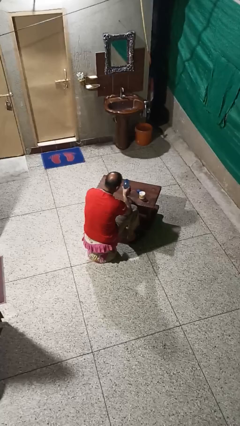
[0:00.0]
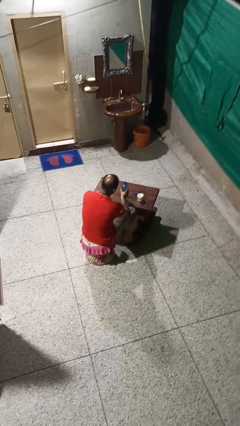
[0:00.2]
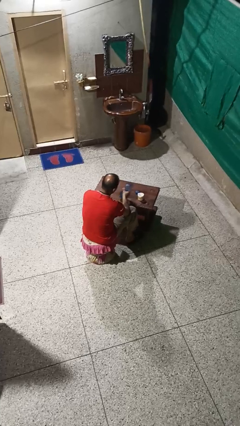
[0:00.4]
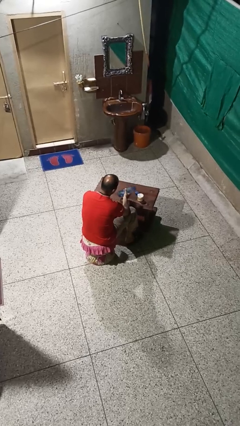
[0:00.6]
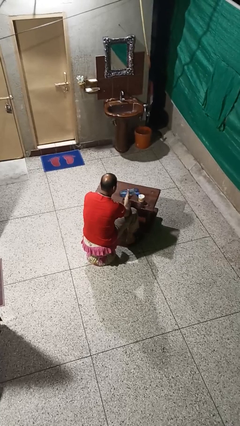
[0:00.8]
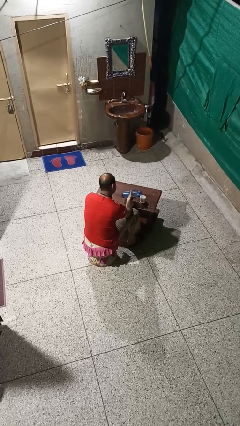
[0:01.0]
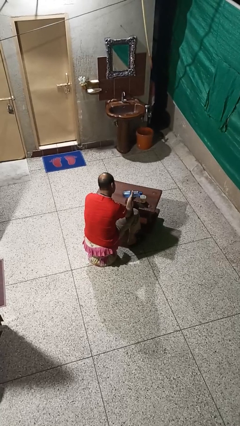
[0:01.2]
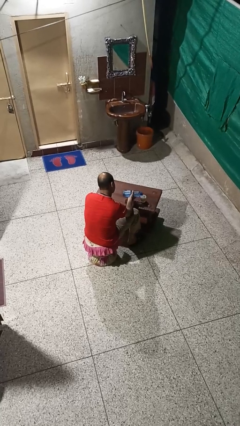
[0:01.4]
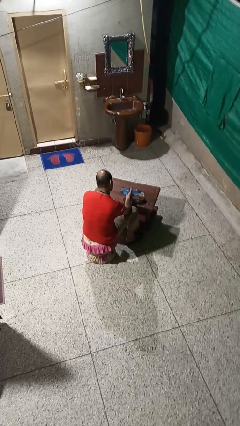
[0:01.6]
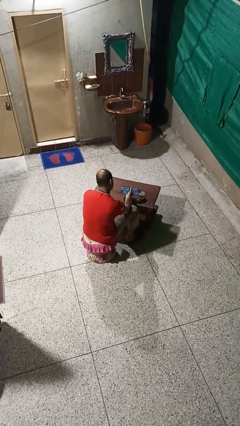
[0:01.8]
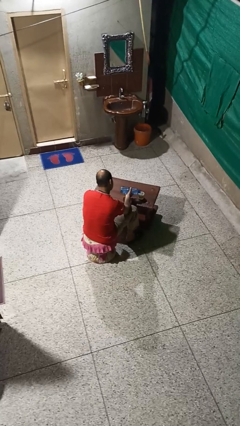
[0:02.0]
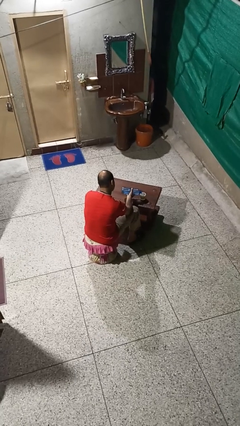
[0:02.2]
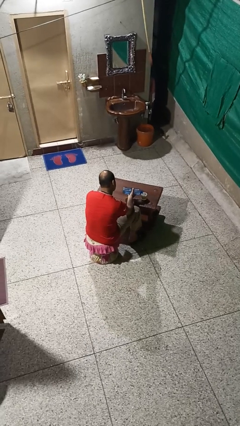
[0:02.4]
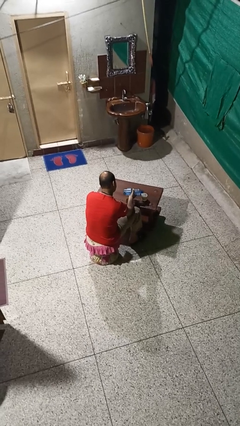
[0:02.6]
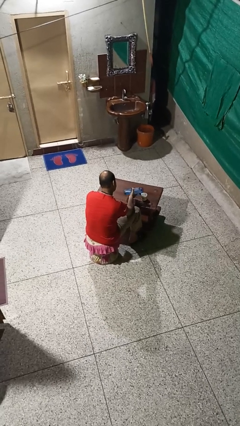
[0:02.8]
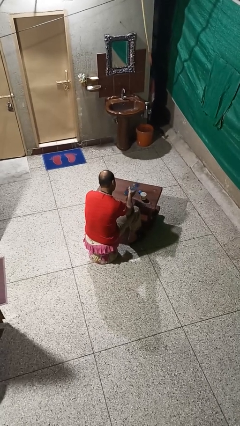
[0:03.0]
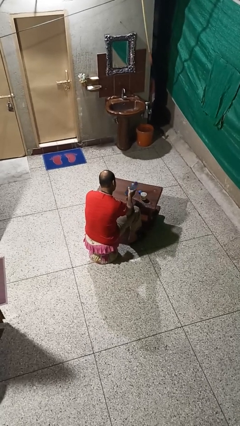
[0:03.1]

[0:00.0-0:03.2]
person pours liquid into cup

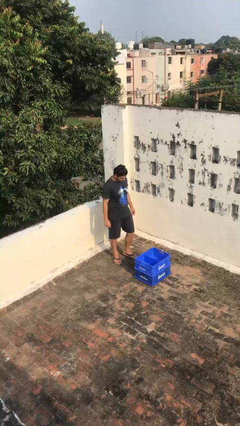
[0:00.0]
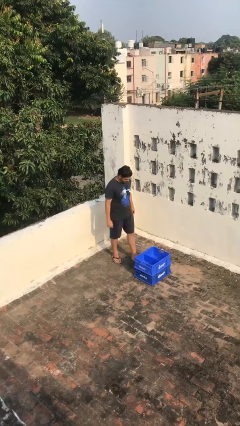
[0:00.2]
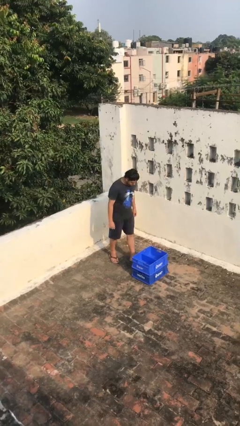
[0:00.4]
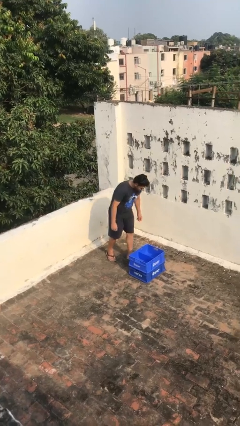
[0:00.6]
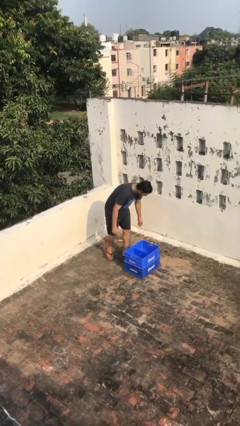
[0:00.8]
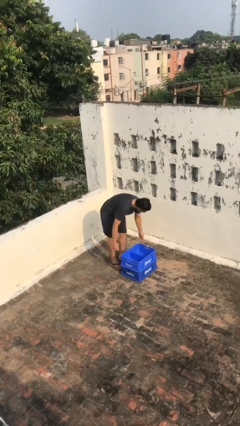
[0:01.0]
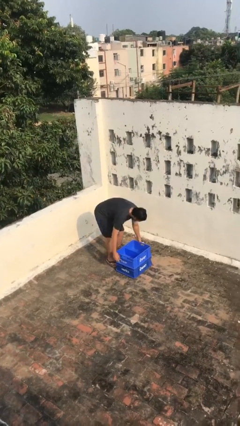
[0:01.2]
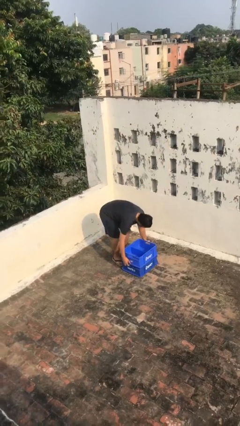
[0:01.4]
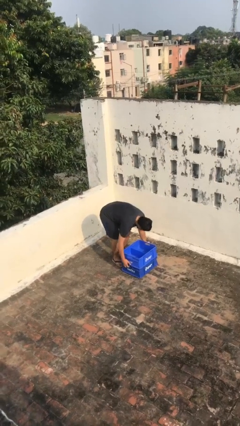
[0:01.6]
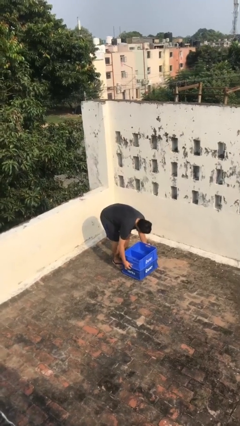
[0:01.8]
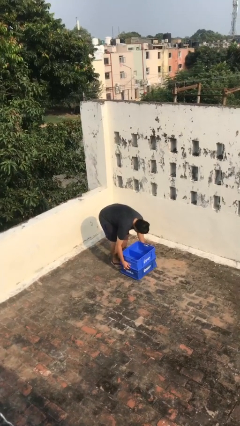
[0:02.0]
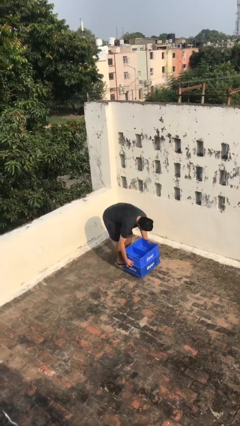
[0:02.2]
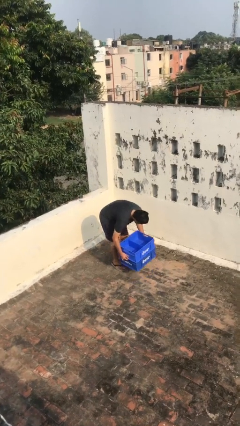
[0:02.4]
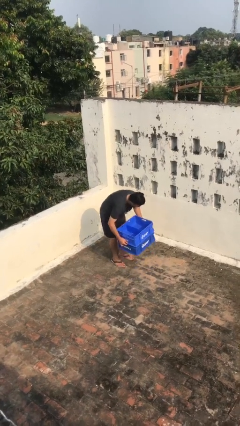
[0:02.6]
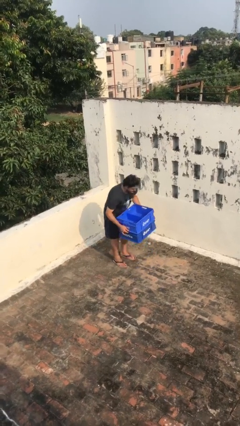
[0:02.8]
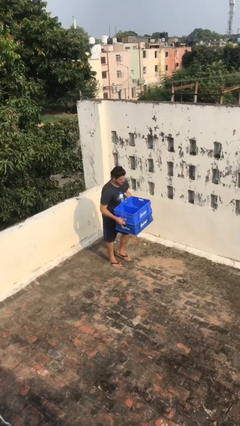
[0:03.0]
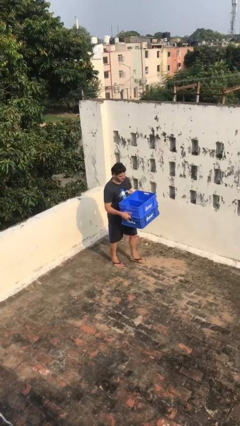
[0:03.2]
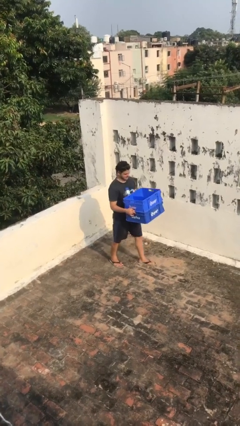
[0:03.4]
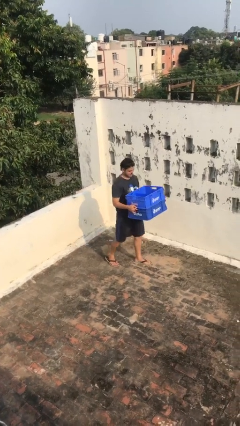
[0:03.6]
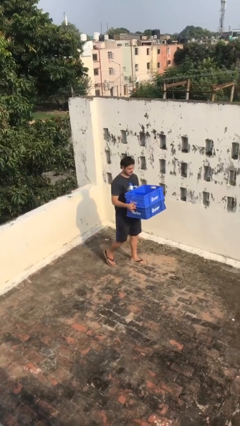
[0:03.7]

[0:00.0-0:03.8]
person picks up object from floor

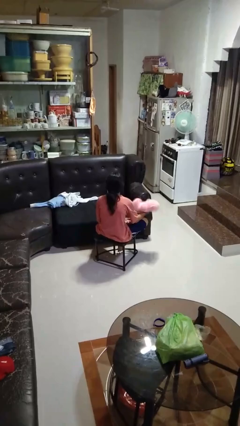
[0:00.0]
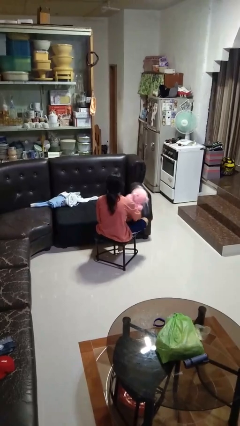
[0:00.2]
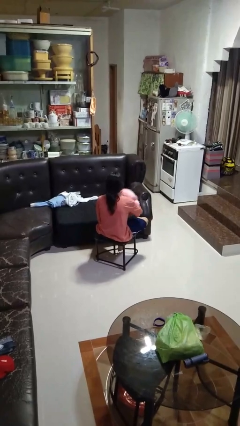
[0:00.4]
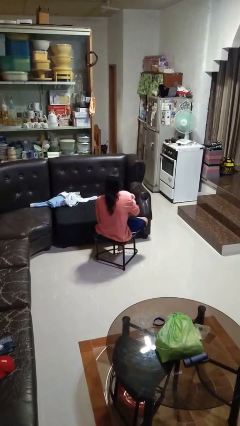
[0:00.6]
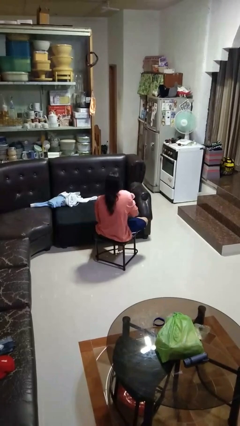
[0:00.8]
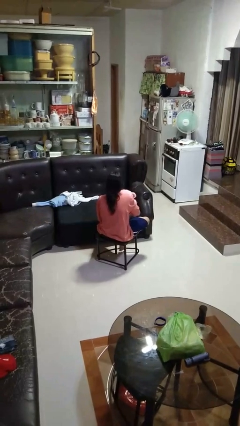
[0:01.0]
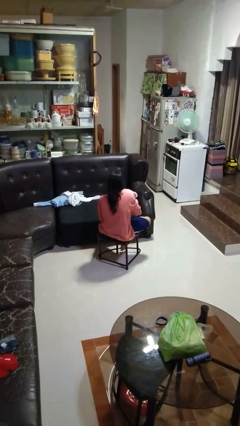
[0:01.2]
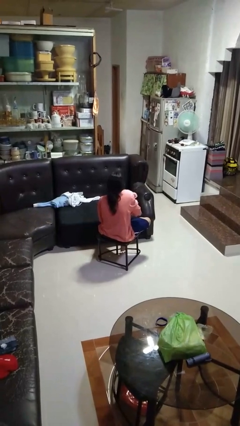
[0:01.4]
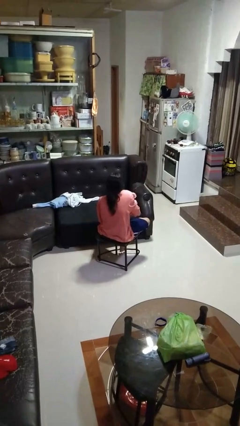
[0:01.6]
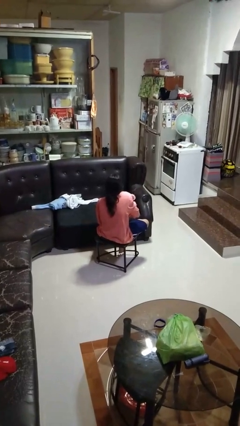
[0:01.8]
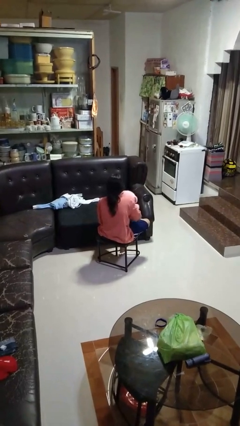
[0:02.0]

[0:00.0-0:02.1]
person hugs stuffed animal

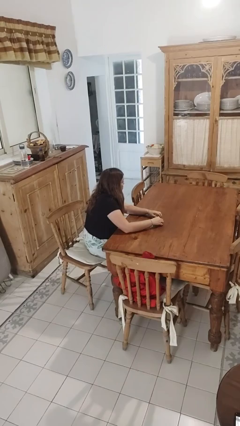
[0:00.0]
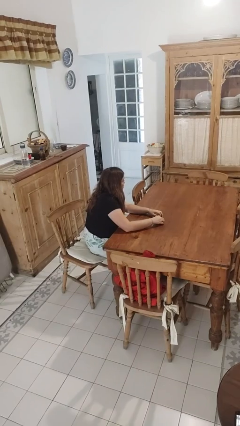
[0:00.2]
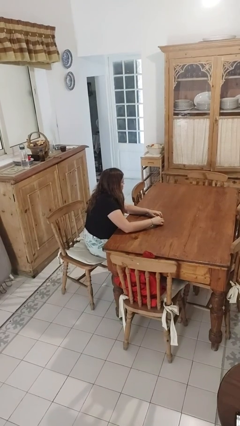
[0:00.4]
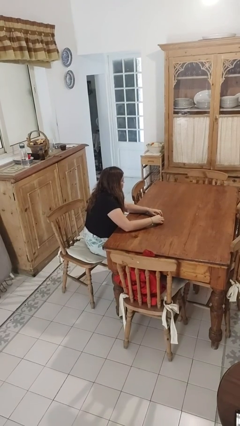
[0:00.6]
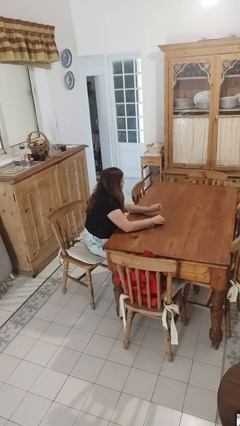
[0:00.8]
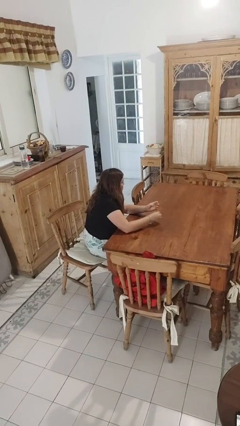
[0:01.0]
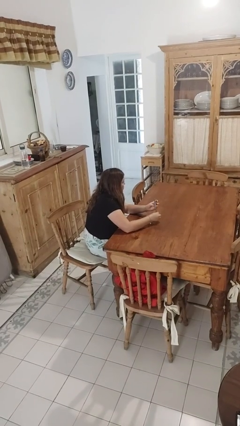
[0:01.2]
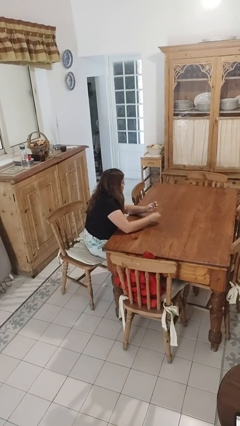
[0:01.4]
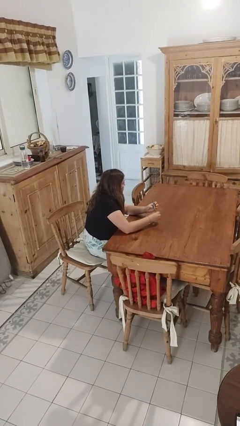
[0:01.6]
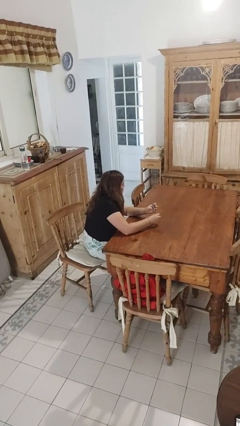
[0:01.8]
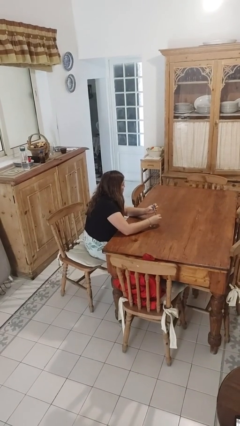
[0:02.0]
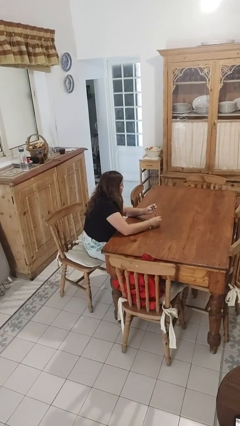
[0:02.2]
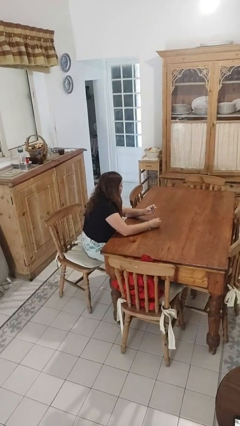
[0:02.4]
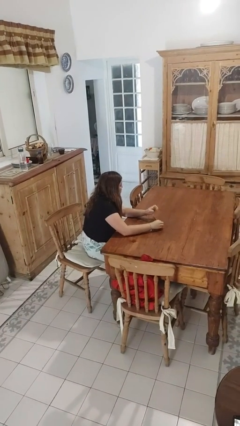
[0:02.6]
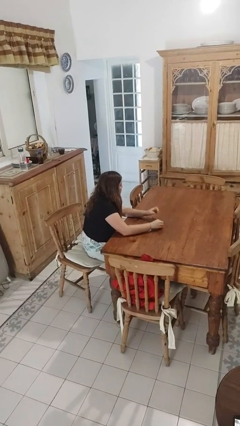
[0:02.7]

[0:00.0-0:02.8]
person files fingernails

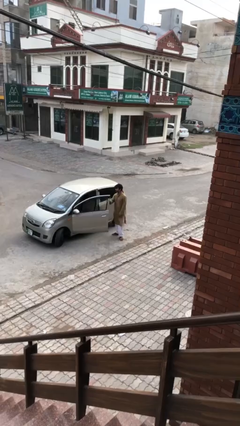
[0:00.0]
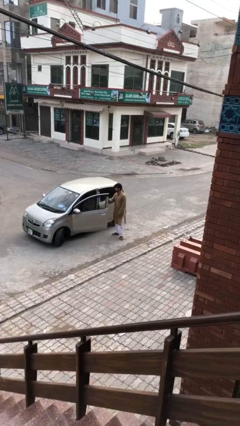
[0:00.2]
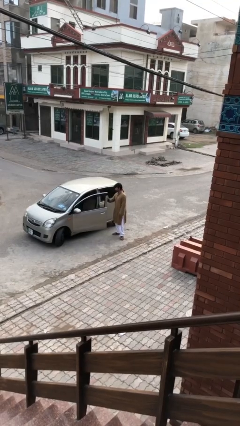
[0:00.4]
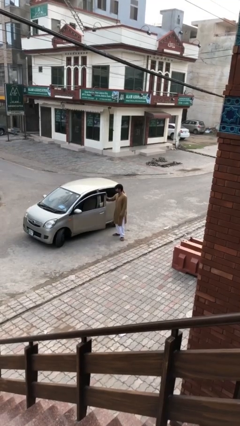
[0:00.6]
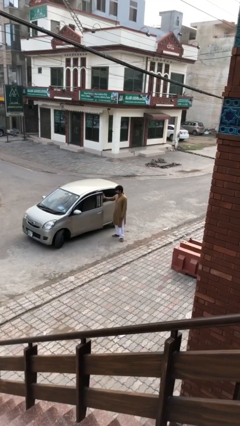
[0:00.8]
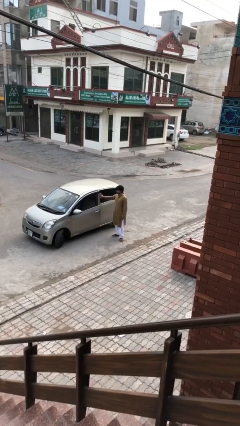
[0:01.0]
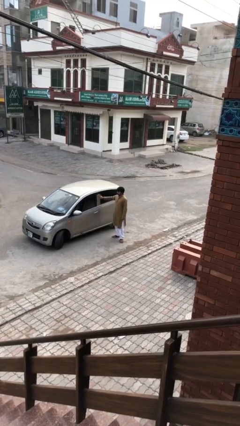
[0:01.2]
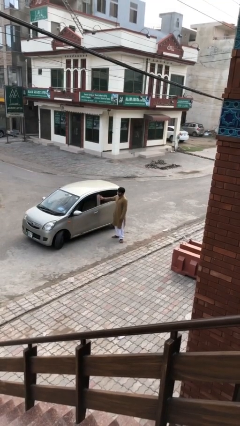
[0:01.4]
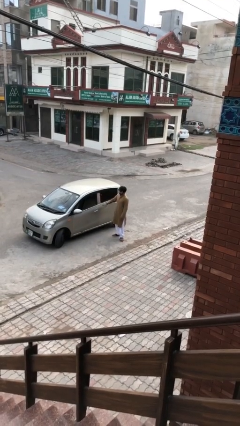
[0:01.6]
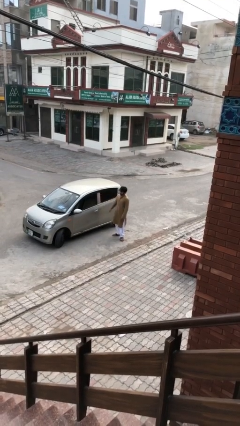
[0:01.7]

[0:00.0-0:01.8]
person closes car door

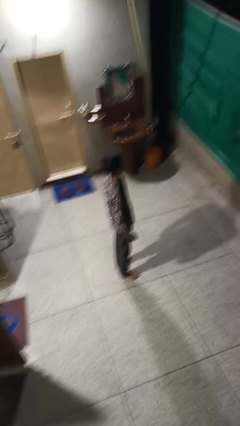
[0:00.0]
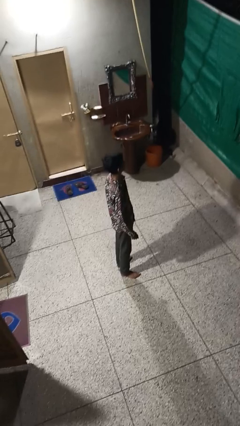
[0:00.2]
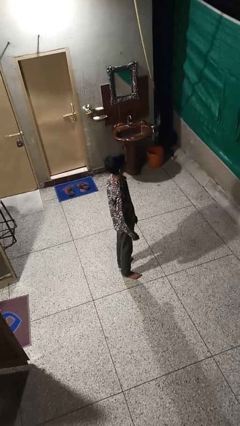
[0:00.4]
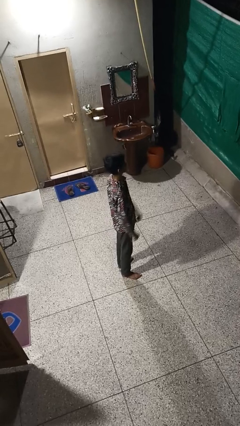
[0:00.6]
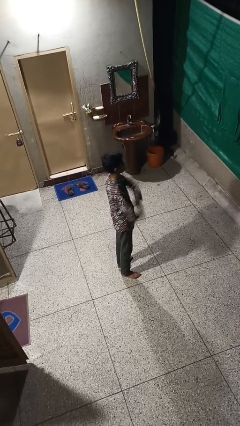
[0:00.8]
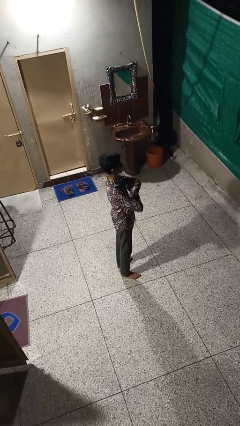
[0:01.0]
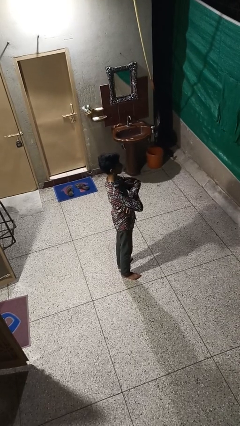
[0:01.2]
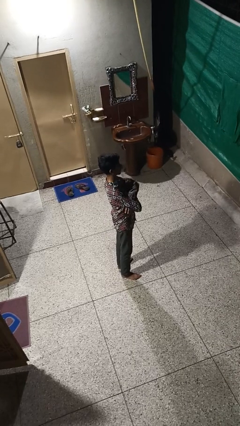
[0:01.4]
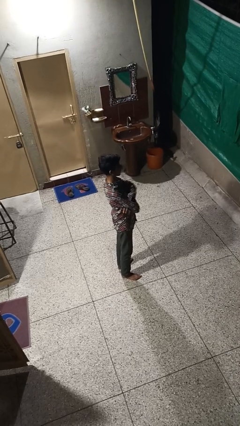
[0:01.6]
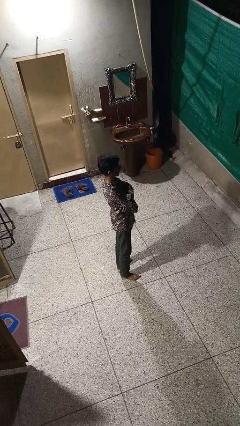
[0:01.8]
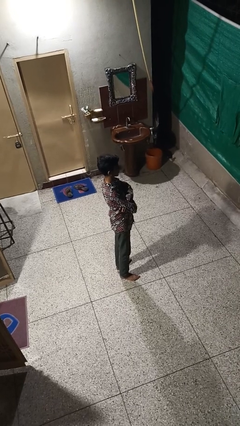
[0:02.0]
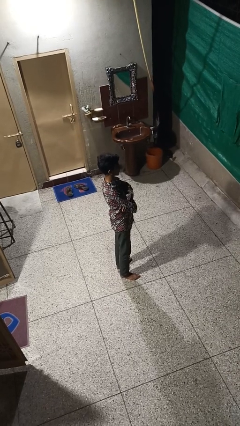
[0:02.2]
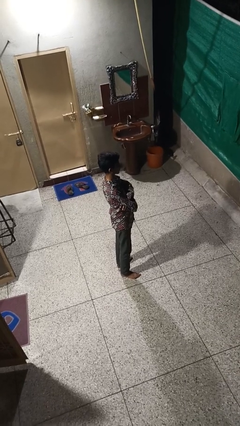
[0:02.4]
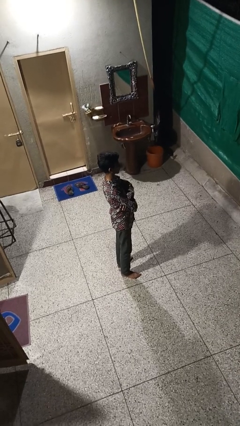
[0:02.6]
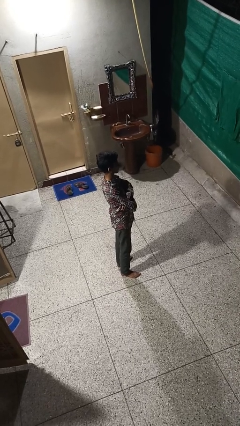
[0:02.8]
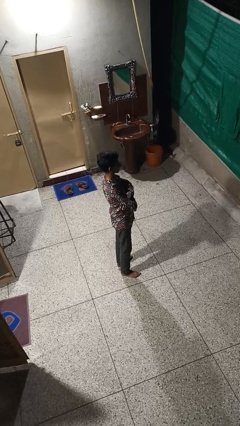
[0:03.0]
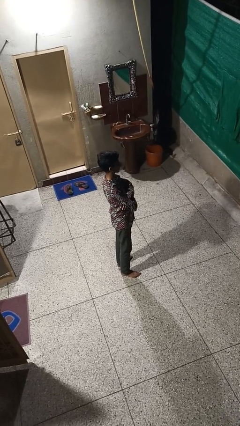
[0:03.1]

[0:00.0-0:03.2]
person crosses arms

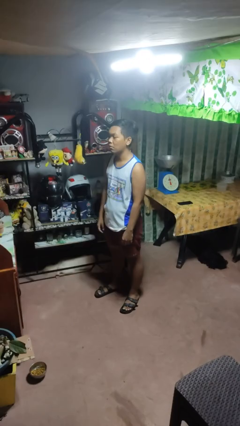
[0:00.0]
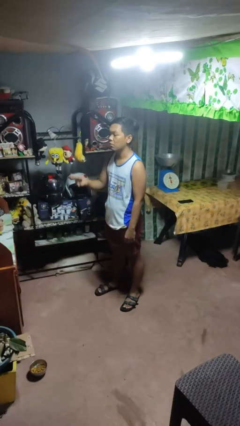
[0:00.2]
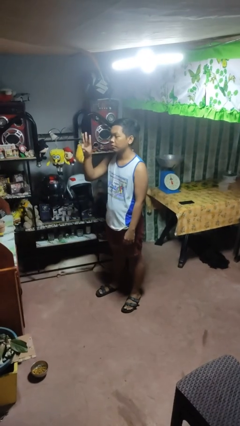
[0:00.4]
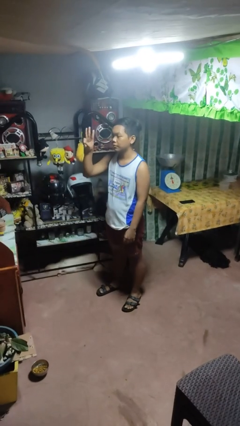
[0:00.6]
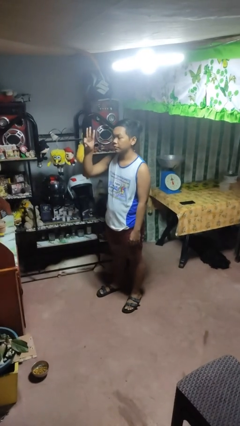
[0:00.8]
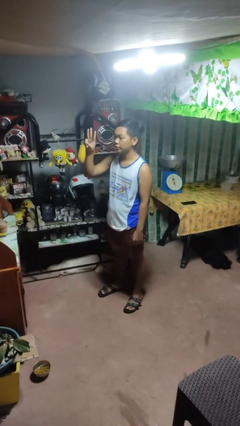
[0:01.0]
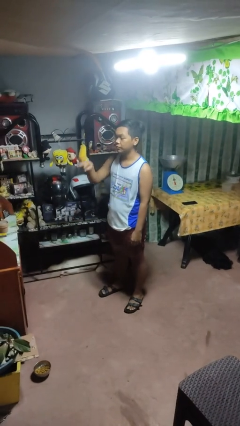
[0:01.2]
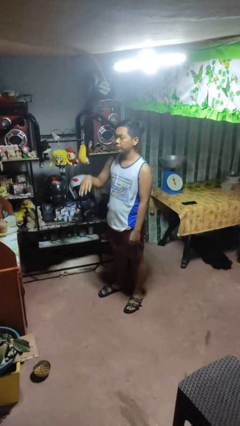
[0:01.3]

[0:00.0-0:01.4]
person gestures number three
